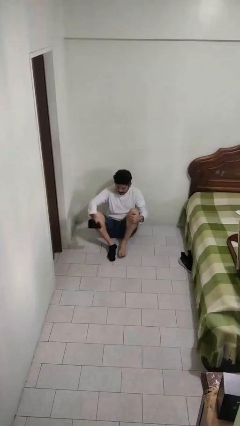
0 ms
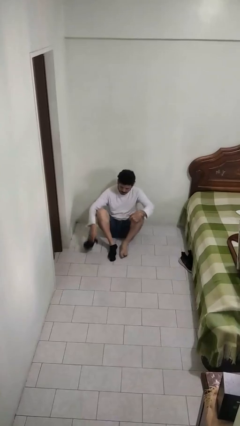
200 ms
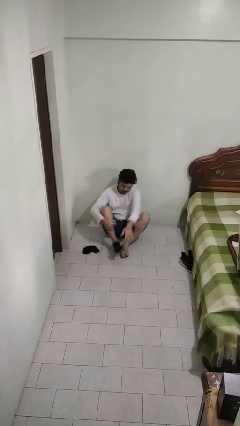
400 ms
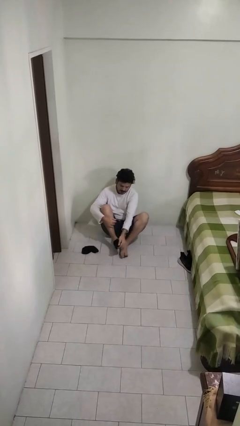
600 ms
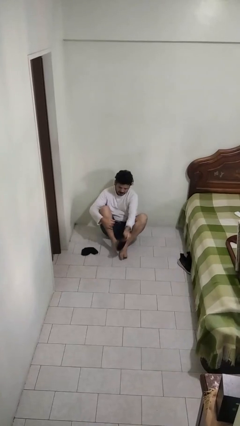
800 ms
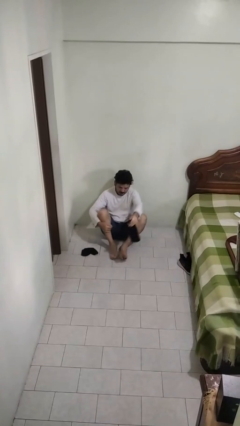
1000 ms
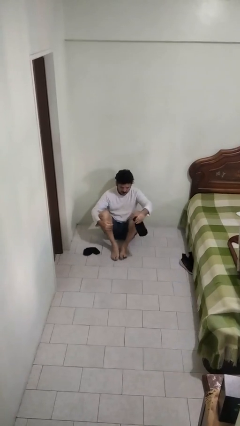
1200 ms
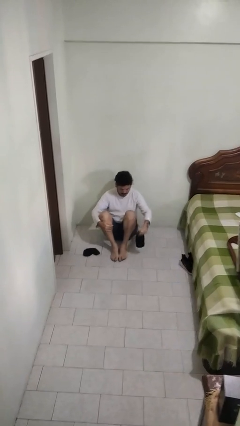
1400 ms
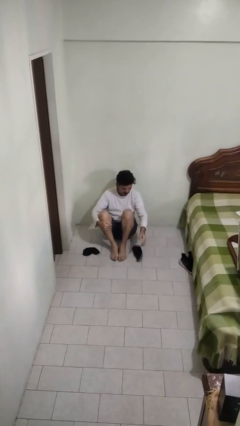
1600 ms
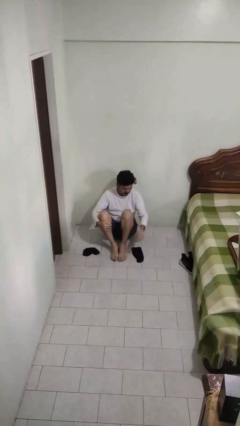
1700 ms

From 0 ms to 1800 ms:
person takes off socks

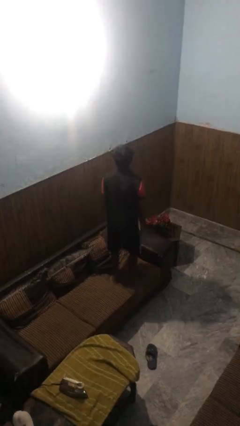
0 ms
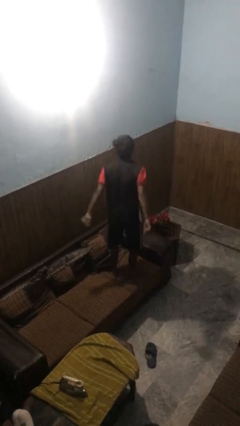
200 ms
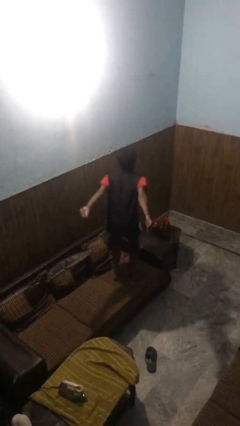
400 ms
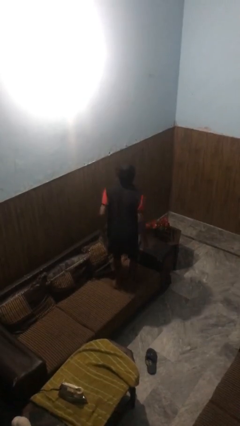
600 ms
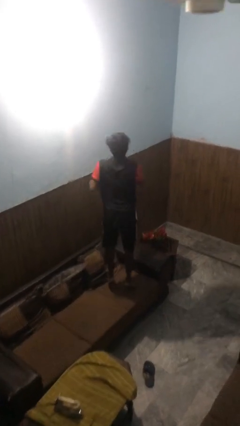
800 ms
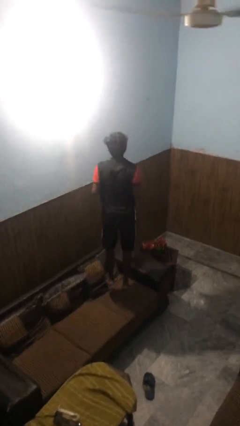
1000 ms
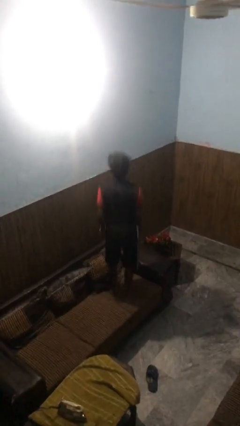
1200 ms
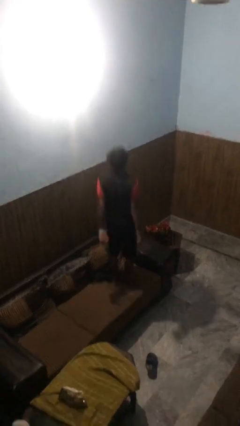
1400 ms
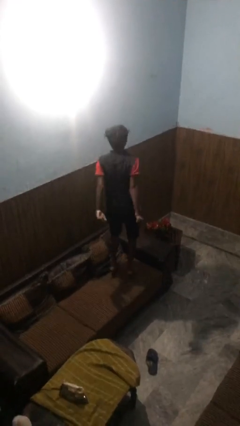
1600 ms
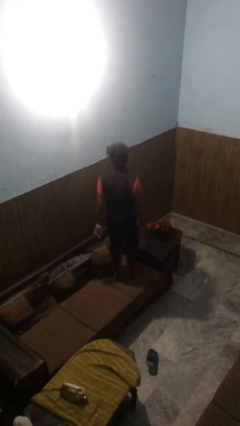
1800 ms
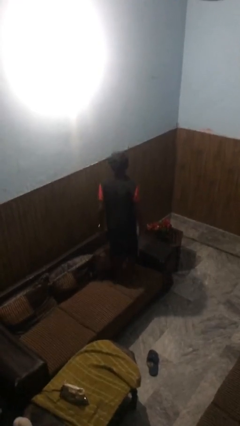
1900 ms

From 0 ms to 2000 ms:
person jumps on couch

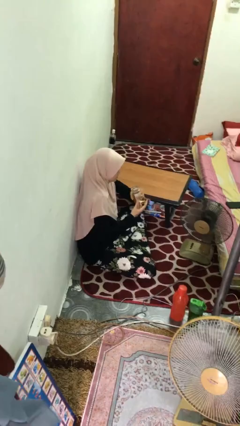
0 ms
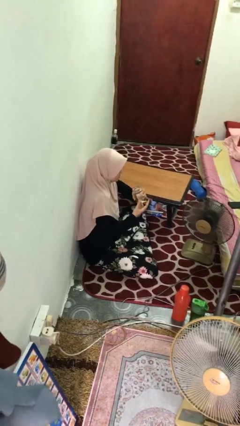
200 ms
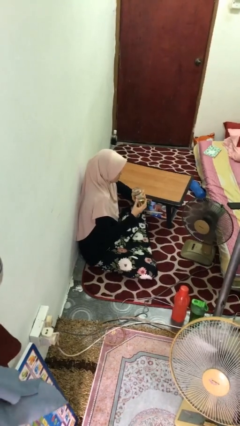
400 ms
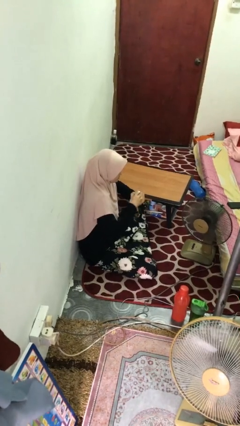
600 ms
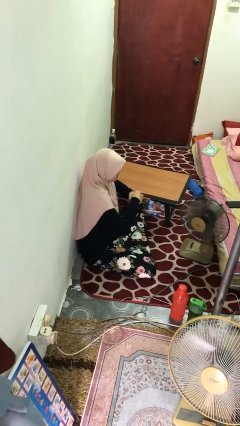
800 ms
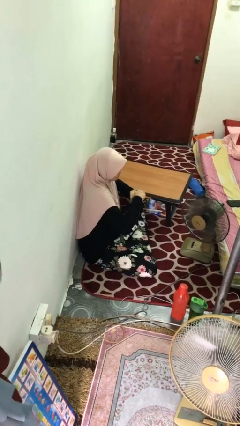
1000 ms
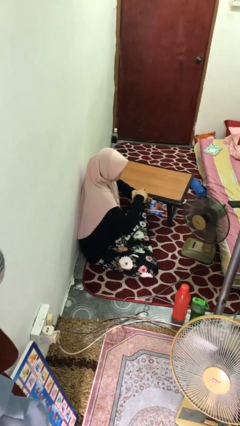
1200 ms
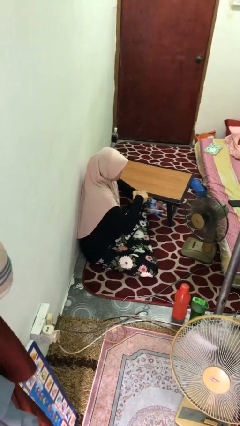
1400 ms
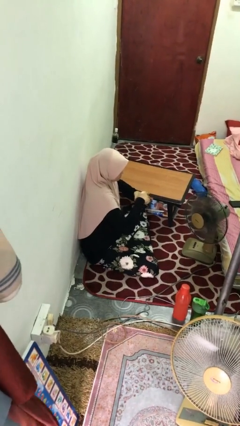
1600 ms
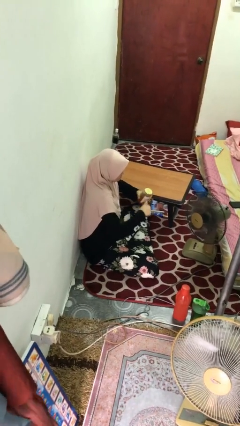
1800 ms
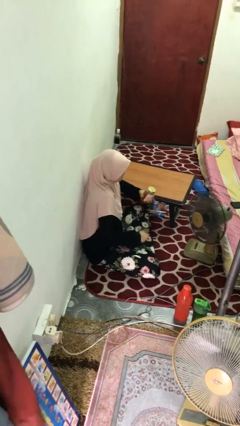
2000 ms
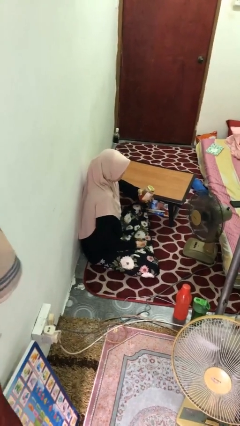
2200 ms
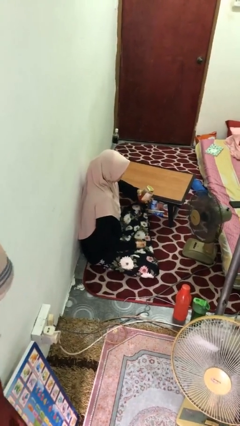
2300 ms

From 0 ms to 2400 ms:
person closes jar

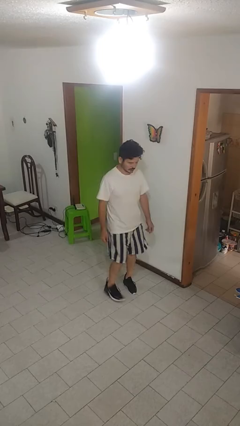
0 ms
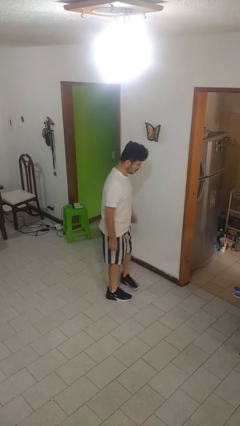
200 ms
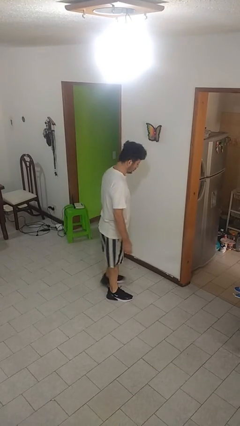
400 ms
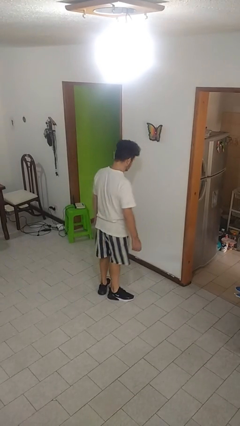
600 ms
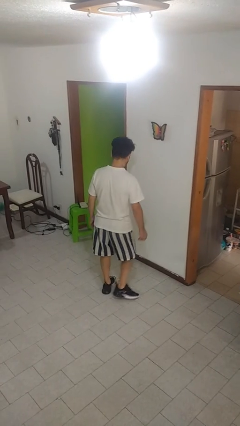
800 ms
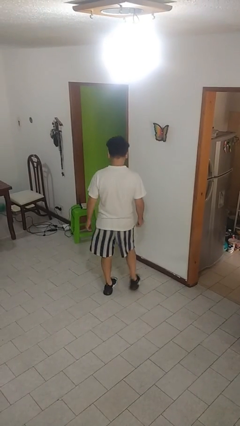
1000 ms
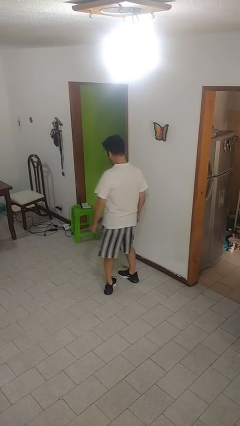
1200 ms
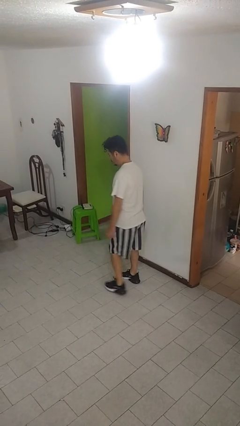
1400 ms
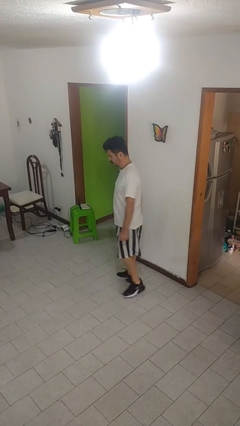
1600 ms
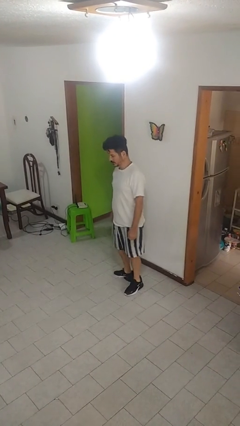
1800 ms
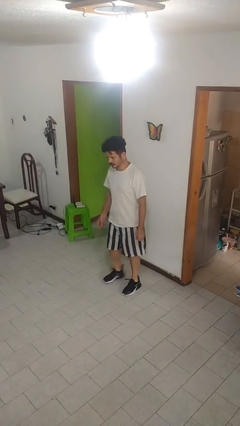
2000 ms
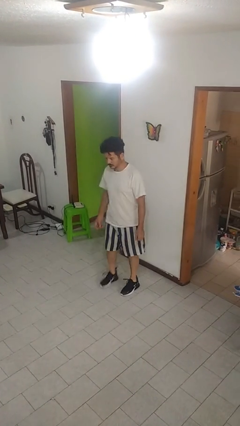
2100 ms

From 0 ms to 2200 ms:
person twirls

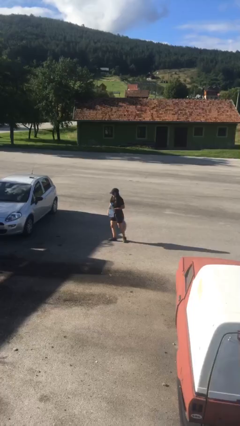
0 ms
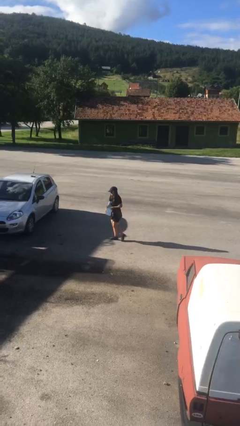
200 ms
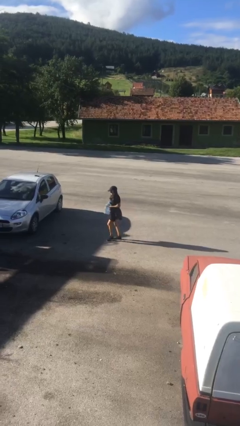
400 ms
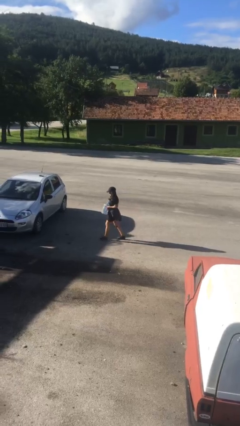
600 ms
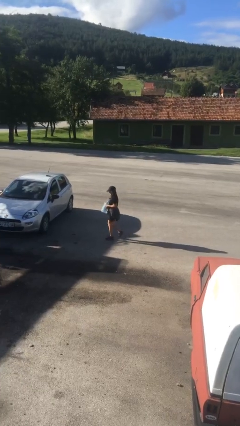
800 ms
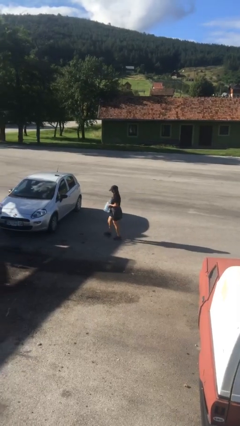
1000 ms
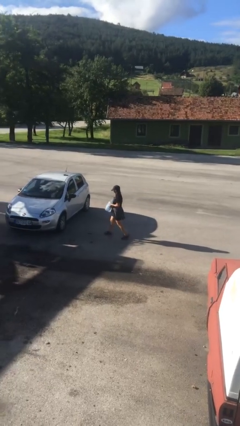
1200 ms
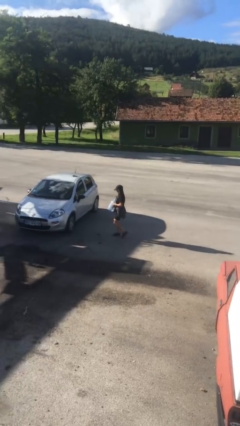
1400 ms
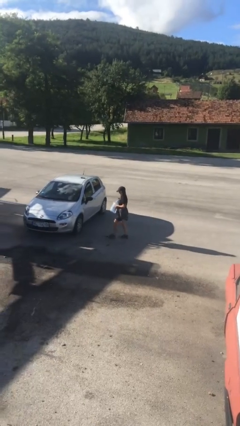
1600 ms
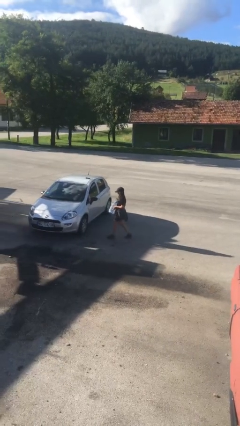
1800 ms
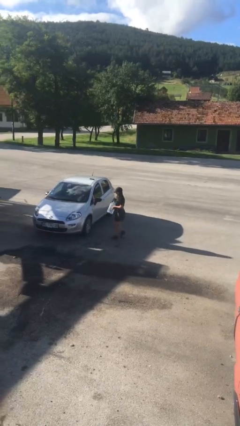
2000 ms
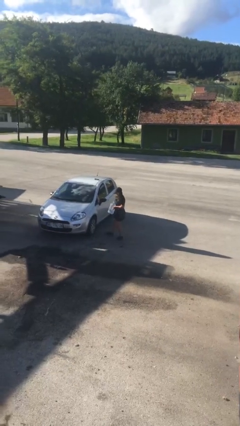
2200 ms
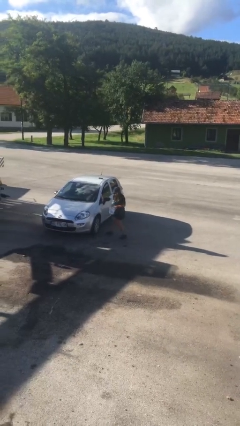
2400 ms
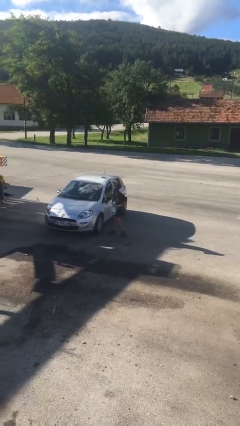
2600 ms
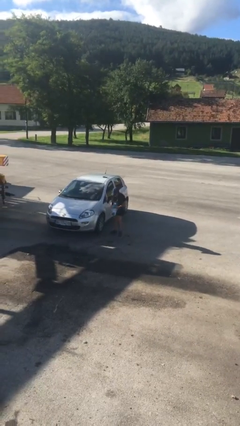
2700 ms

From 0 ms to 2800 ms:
person carries heavy object

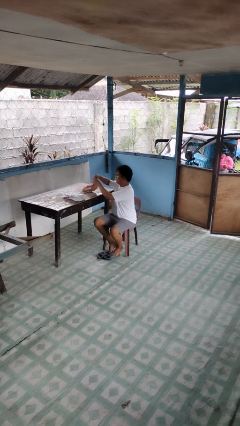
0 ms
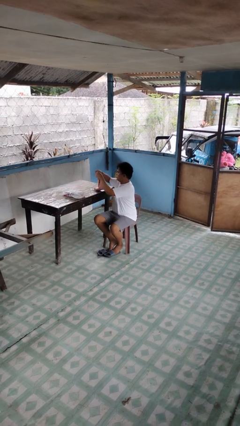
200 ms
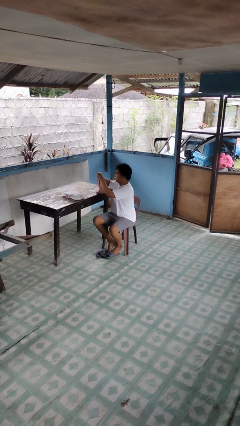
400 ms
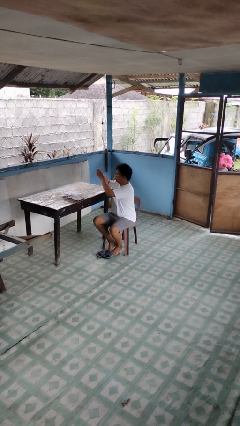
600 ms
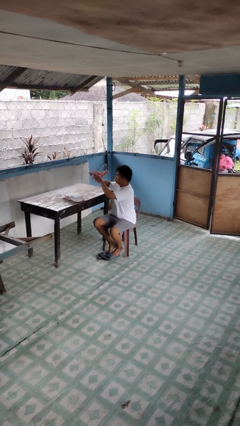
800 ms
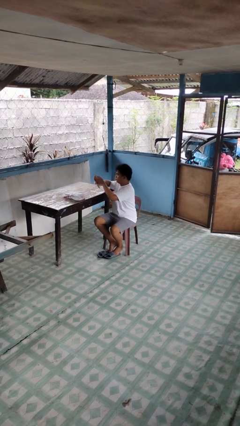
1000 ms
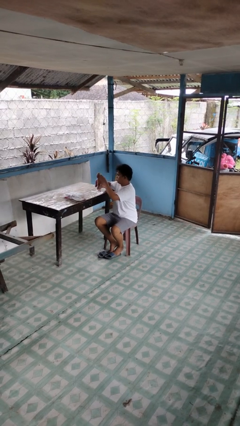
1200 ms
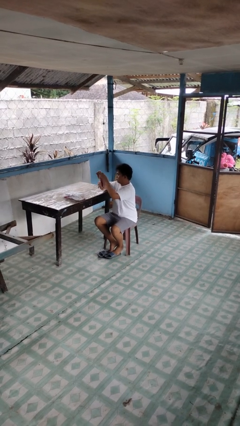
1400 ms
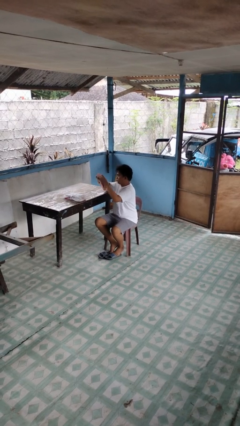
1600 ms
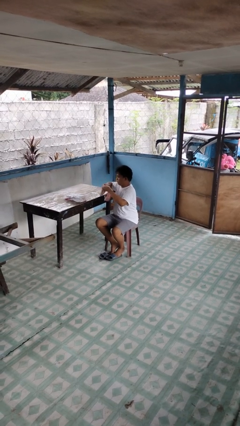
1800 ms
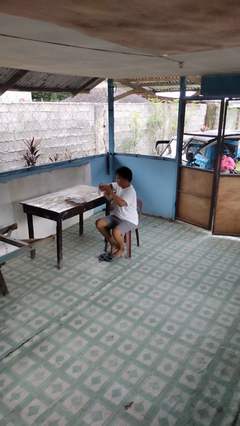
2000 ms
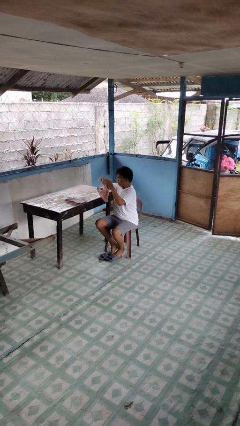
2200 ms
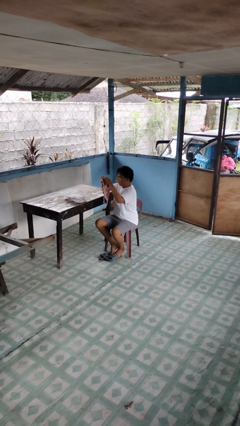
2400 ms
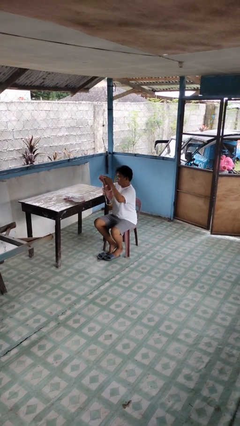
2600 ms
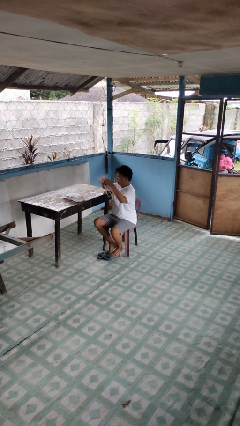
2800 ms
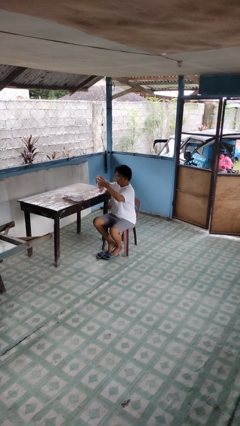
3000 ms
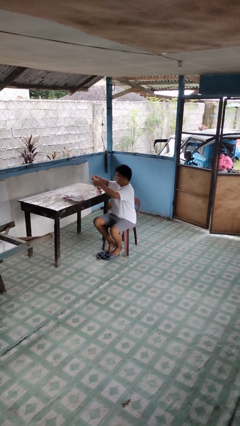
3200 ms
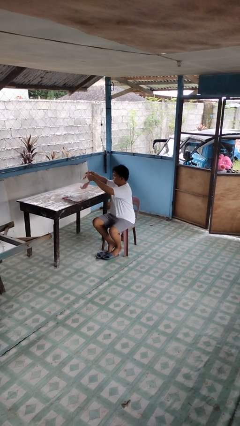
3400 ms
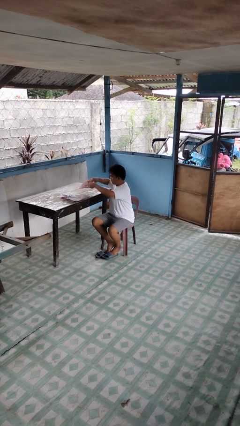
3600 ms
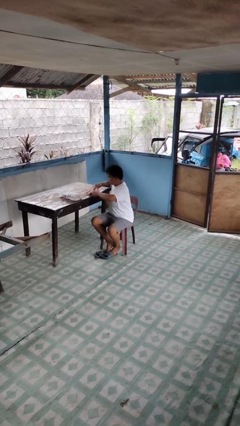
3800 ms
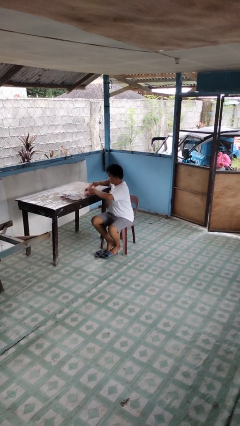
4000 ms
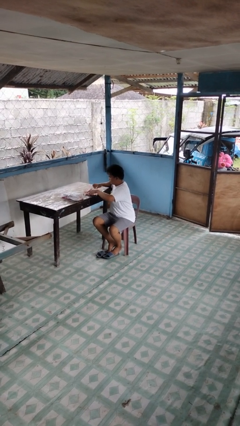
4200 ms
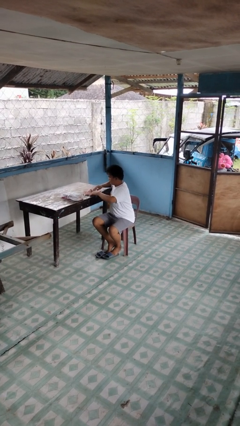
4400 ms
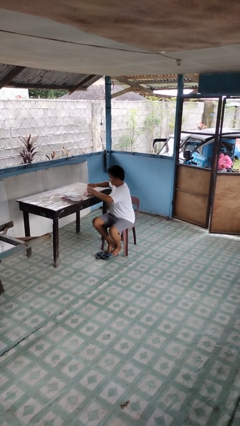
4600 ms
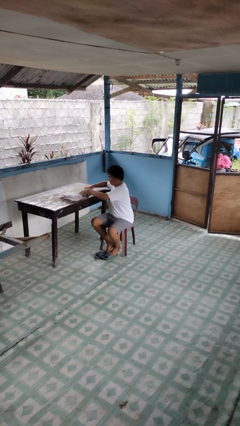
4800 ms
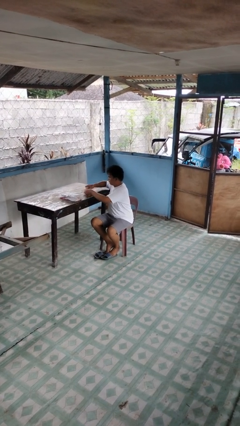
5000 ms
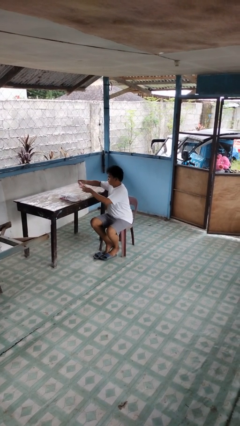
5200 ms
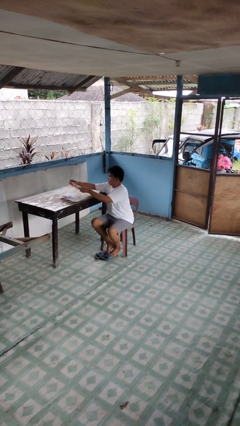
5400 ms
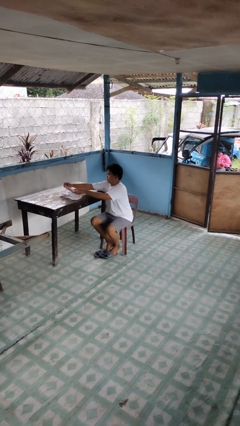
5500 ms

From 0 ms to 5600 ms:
person folds towel

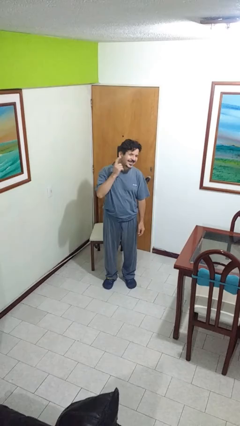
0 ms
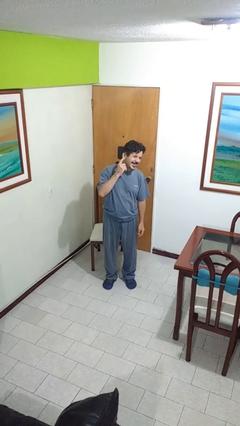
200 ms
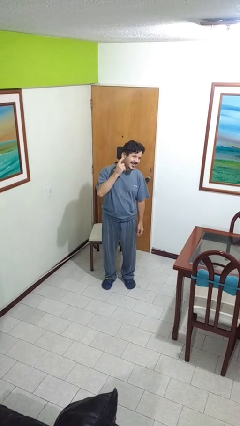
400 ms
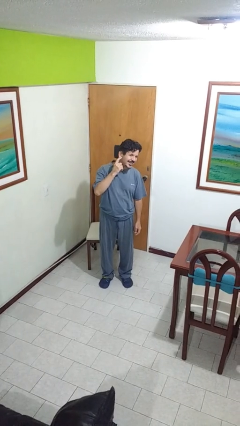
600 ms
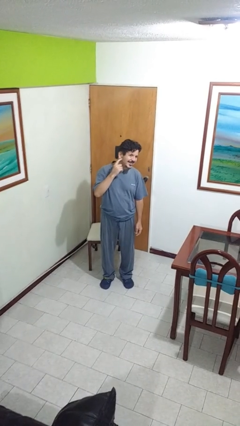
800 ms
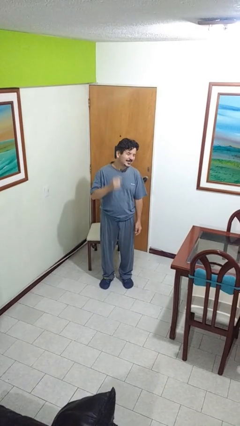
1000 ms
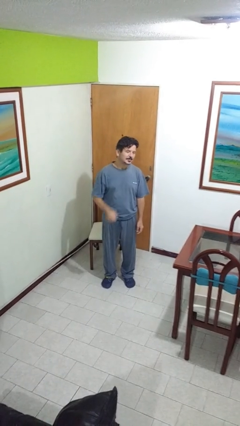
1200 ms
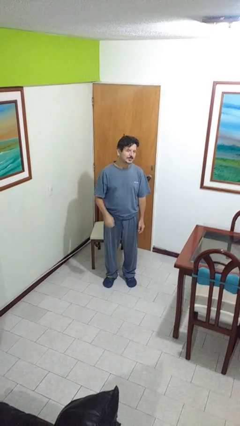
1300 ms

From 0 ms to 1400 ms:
person gestures listen closely
